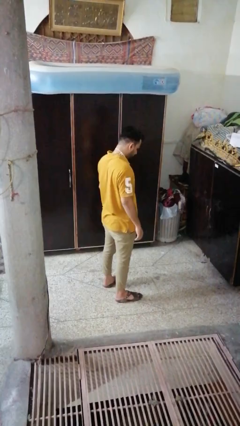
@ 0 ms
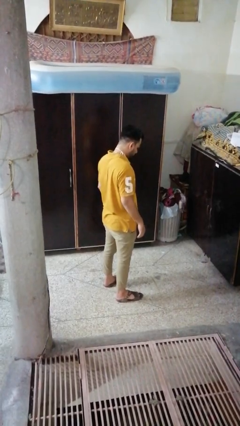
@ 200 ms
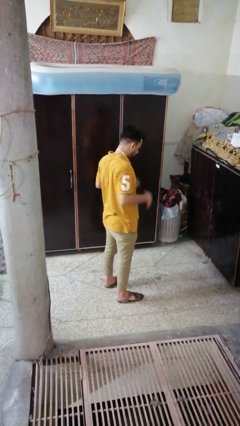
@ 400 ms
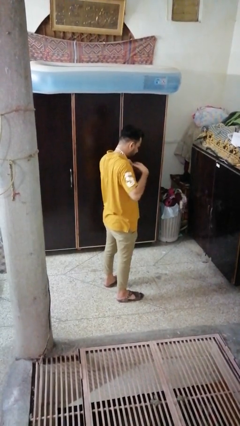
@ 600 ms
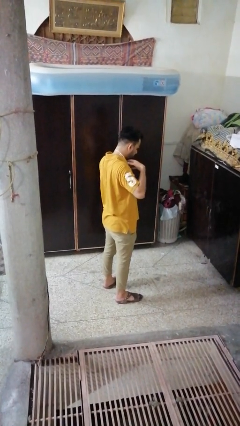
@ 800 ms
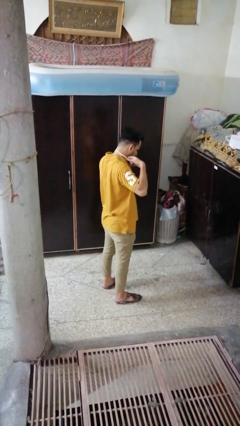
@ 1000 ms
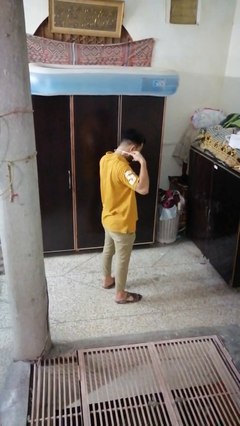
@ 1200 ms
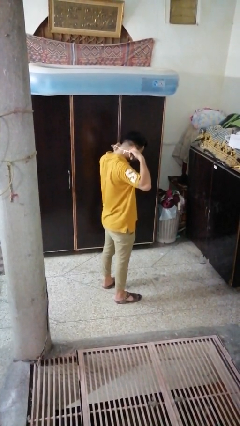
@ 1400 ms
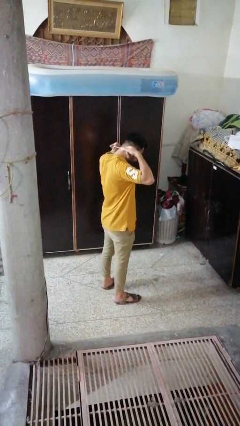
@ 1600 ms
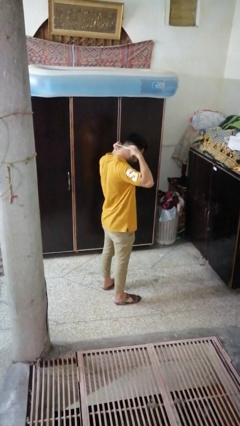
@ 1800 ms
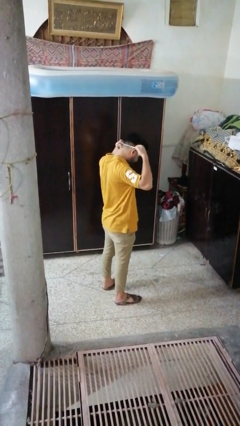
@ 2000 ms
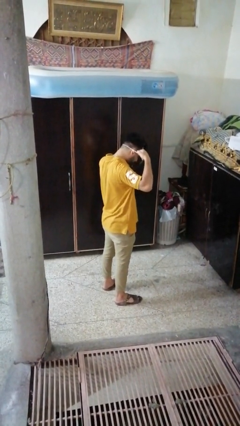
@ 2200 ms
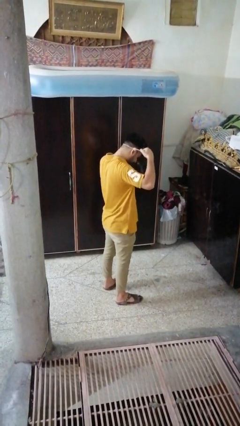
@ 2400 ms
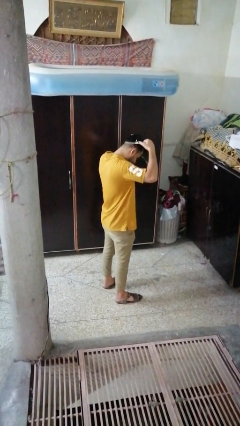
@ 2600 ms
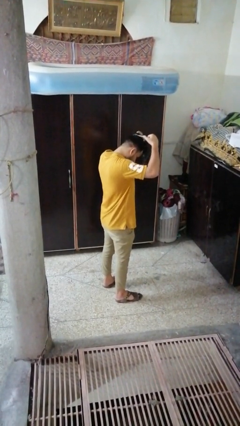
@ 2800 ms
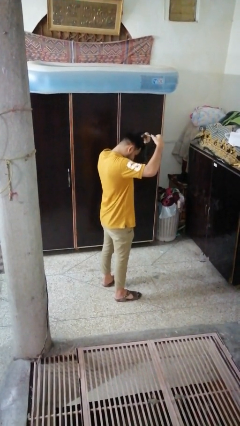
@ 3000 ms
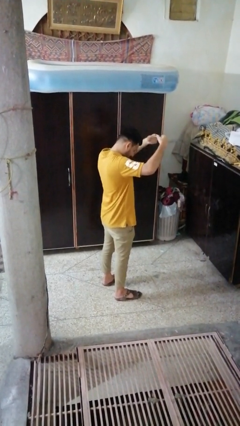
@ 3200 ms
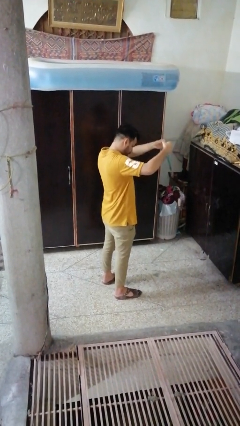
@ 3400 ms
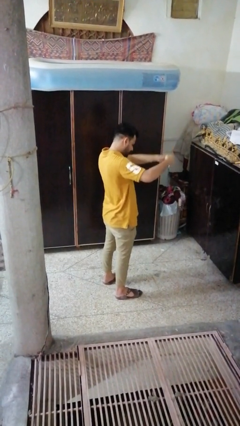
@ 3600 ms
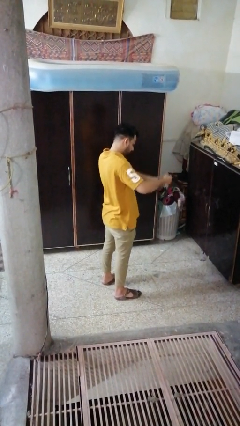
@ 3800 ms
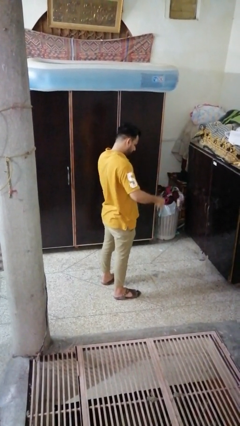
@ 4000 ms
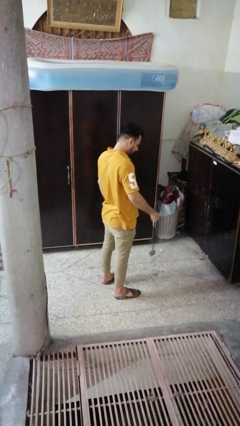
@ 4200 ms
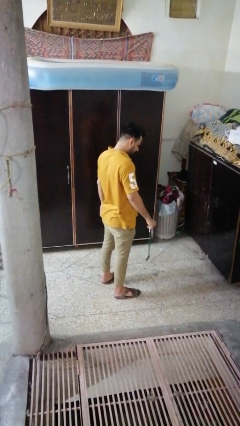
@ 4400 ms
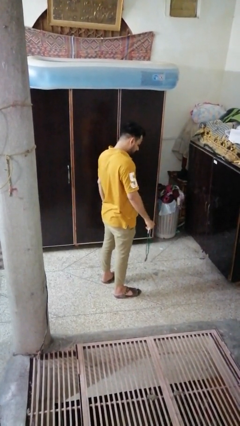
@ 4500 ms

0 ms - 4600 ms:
person takes off necklace

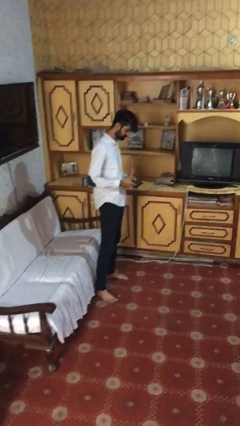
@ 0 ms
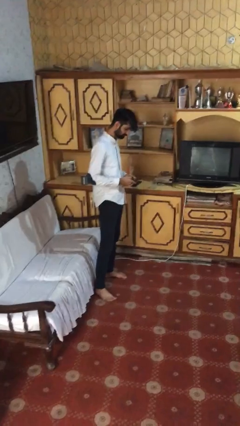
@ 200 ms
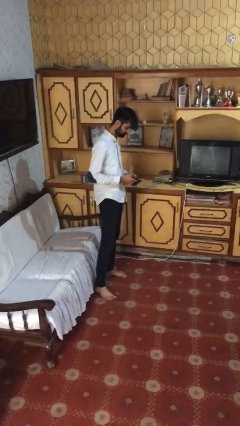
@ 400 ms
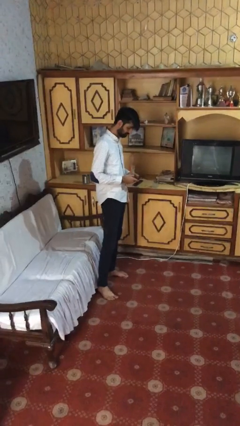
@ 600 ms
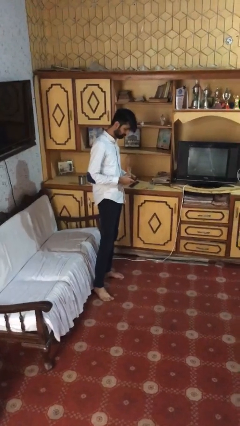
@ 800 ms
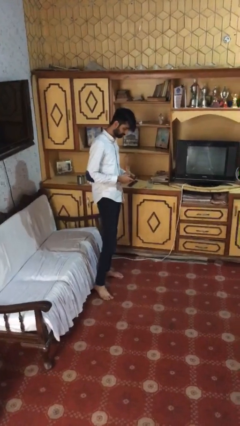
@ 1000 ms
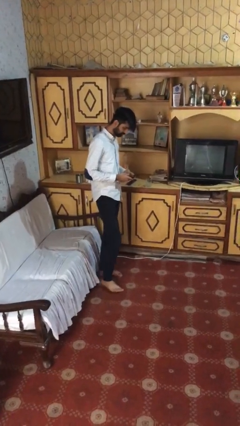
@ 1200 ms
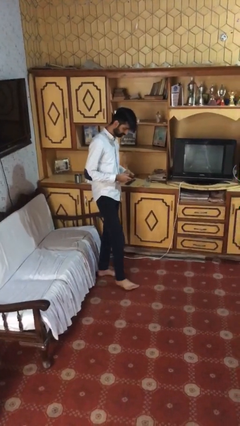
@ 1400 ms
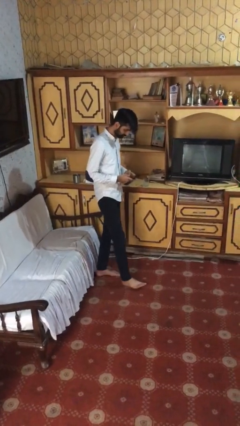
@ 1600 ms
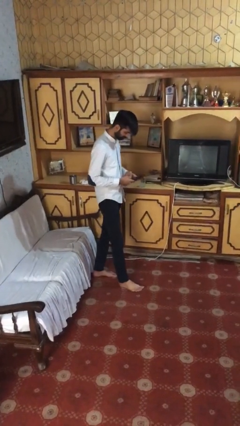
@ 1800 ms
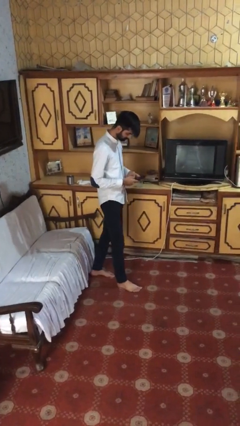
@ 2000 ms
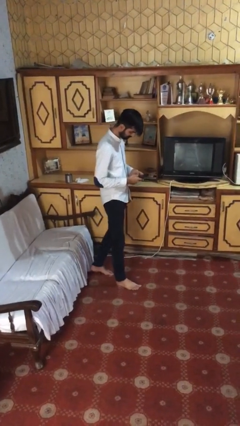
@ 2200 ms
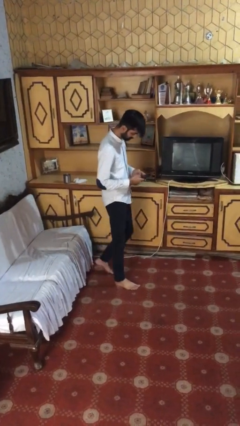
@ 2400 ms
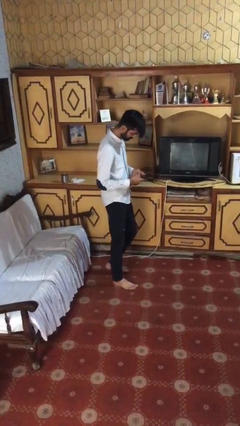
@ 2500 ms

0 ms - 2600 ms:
person texts on phone

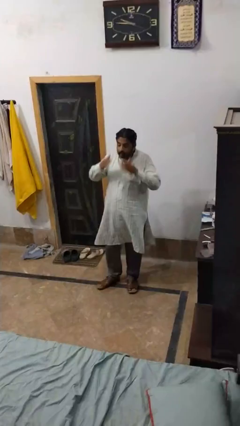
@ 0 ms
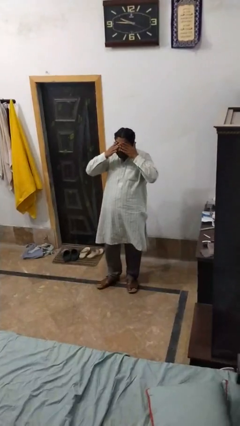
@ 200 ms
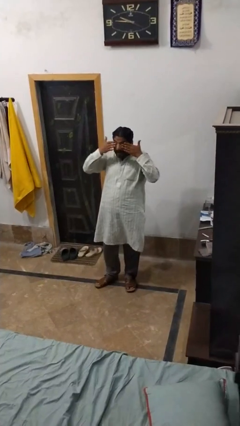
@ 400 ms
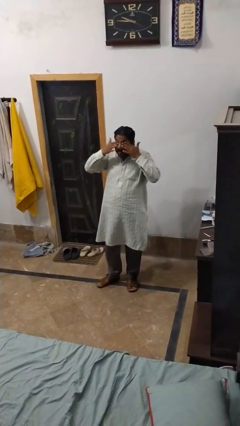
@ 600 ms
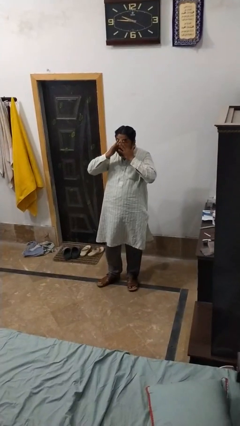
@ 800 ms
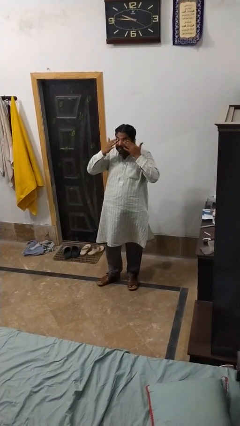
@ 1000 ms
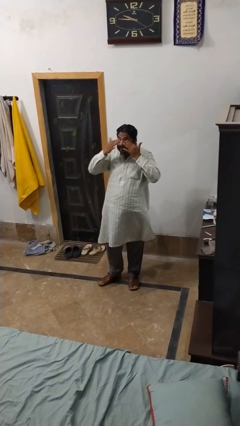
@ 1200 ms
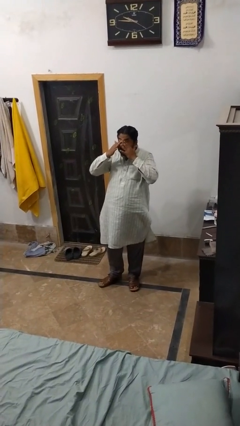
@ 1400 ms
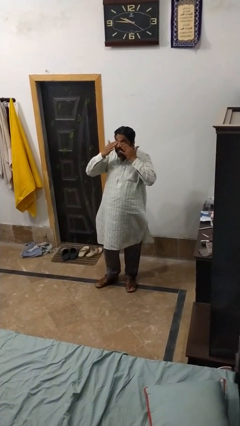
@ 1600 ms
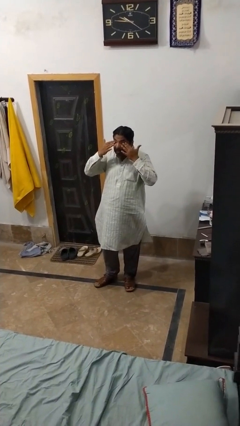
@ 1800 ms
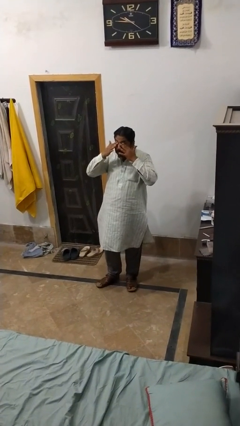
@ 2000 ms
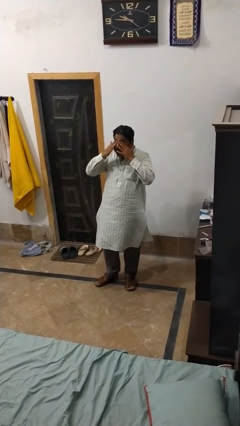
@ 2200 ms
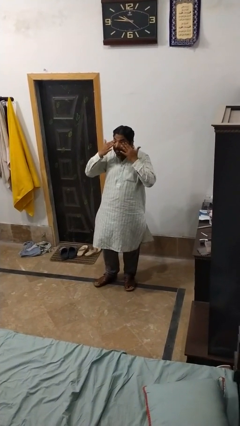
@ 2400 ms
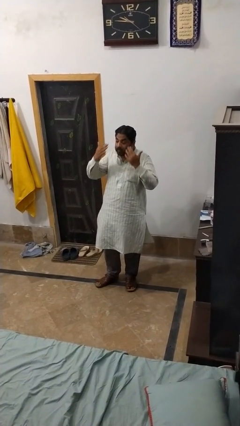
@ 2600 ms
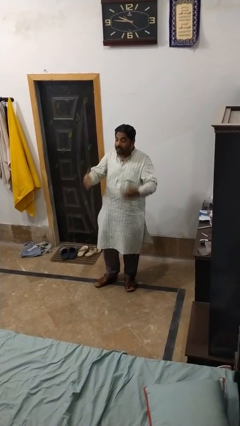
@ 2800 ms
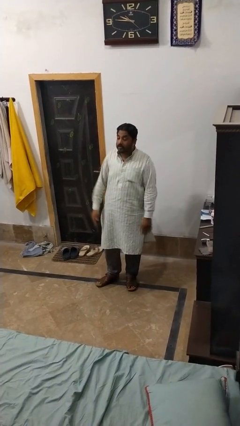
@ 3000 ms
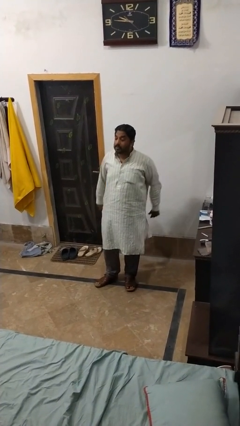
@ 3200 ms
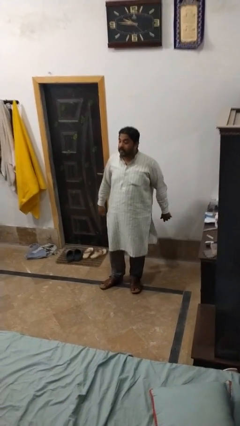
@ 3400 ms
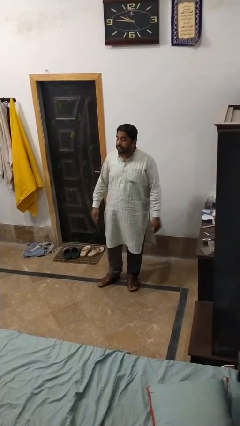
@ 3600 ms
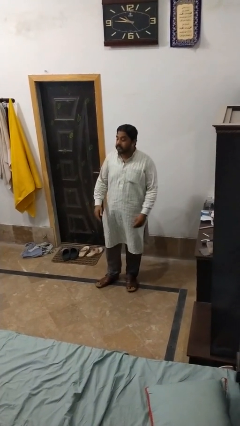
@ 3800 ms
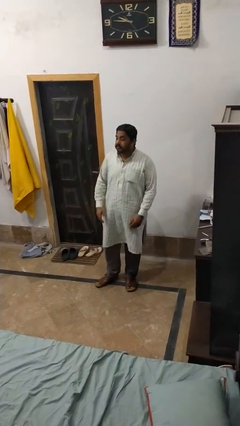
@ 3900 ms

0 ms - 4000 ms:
person rubs eyes

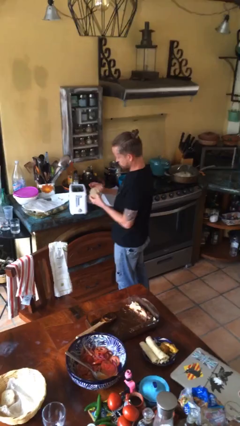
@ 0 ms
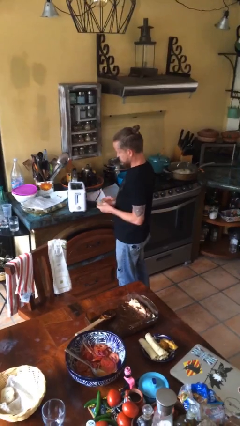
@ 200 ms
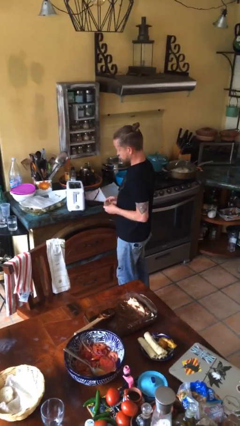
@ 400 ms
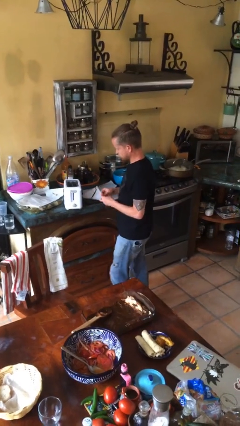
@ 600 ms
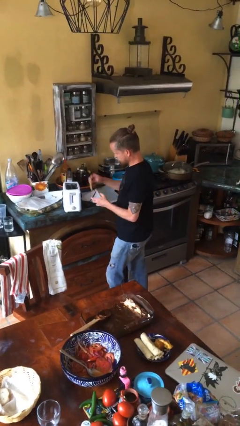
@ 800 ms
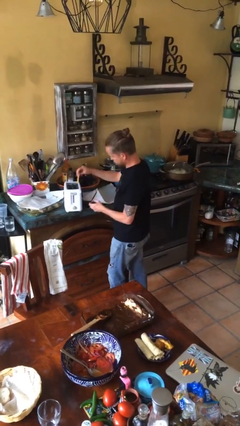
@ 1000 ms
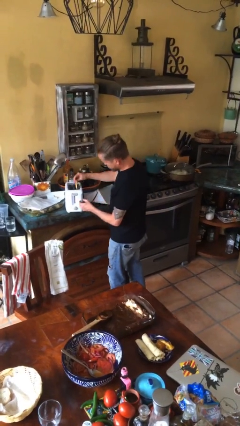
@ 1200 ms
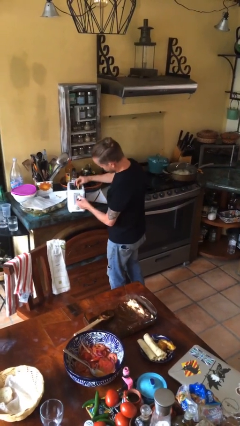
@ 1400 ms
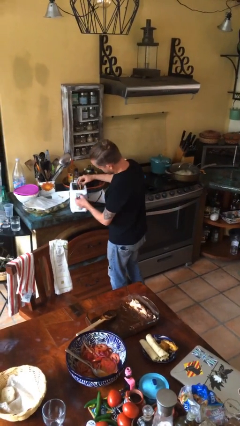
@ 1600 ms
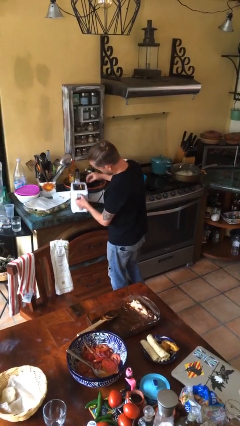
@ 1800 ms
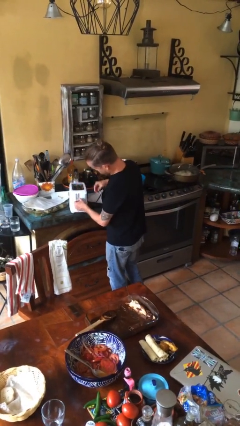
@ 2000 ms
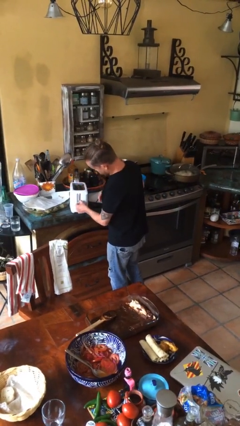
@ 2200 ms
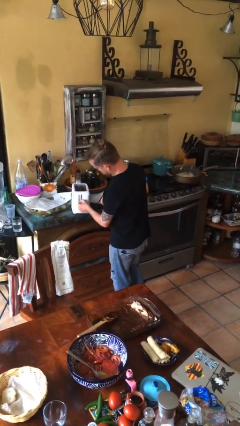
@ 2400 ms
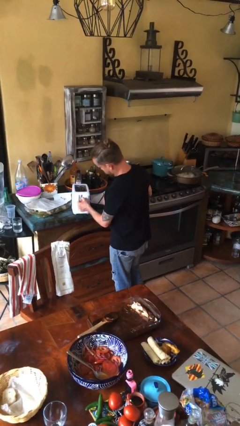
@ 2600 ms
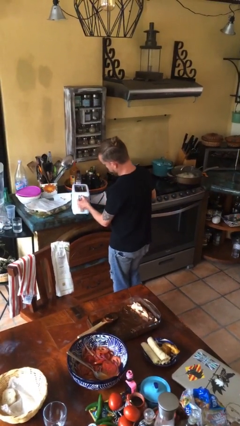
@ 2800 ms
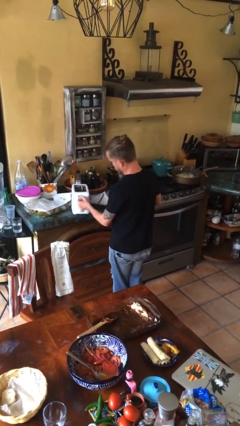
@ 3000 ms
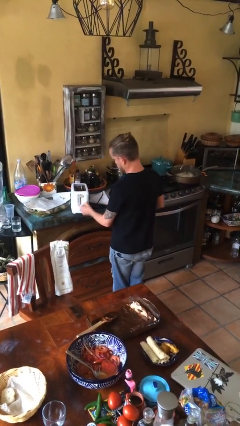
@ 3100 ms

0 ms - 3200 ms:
person puts object into toaster

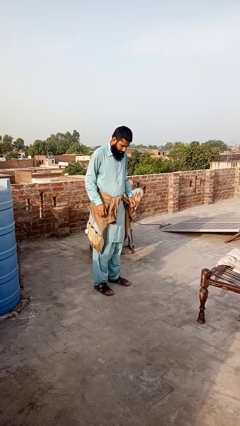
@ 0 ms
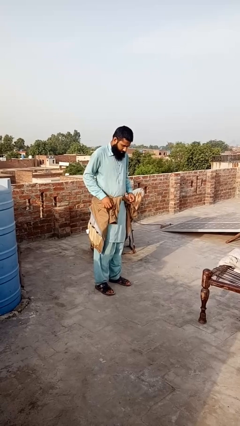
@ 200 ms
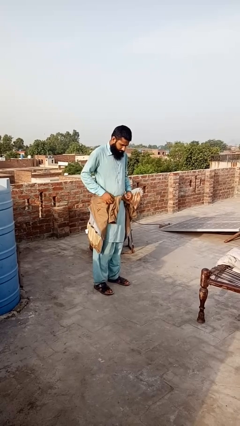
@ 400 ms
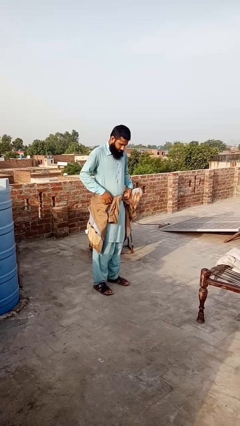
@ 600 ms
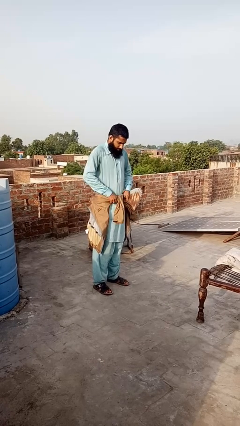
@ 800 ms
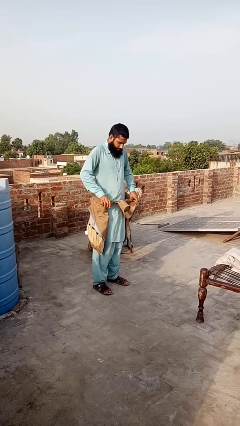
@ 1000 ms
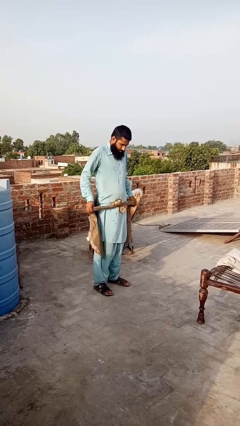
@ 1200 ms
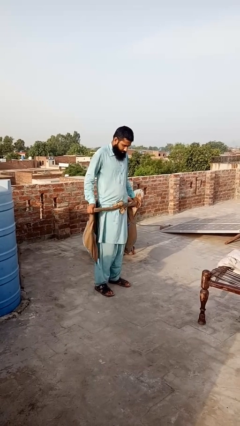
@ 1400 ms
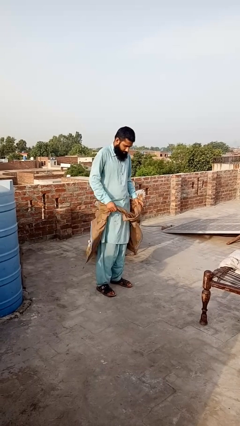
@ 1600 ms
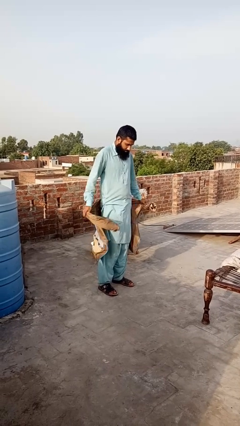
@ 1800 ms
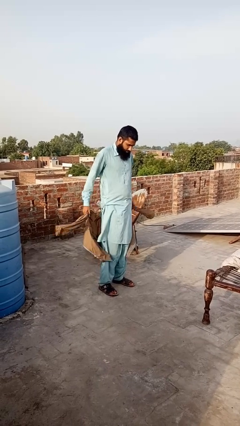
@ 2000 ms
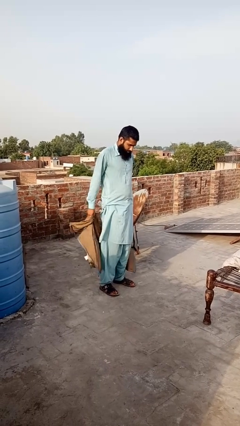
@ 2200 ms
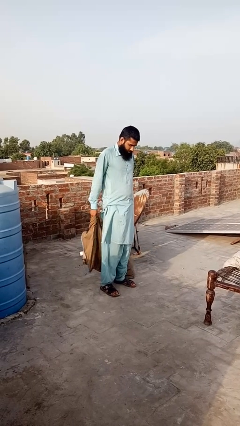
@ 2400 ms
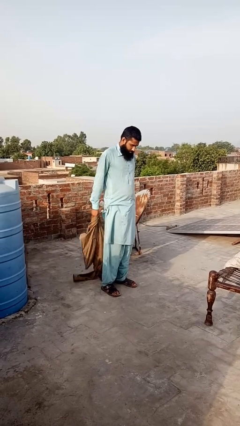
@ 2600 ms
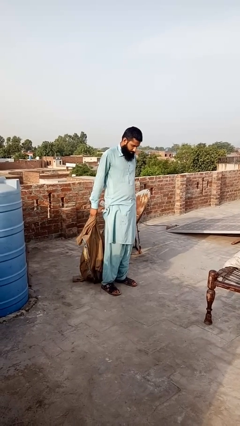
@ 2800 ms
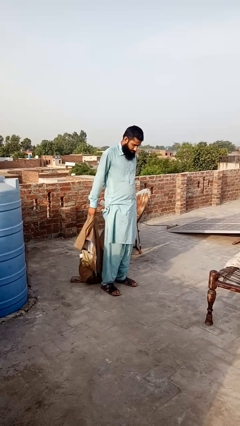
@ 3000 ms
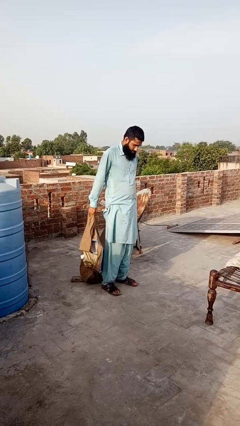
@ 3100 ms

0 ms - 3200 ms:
person unties jacket around waist
